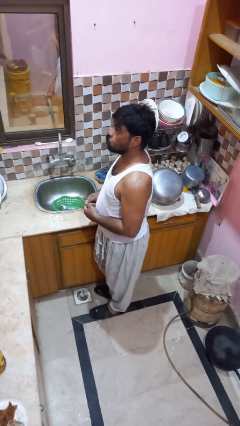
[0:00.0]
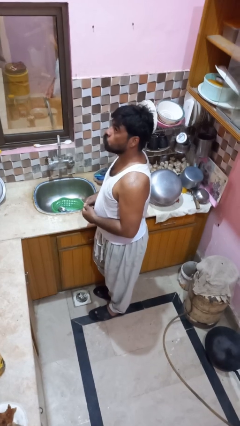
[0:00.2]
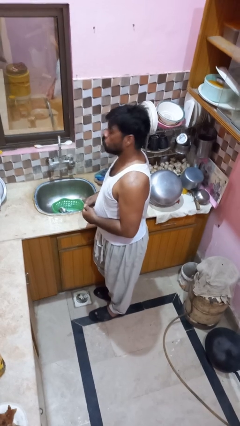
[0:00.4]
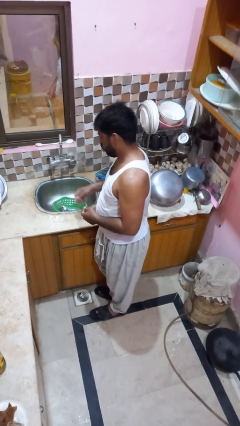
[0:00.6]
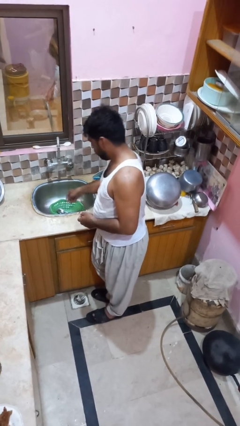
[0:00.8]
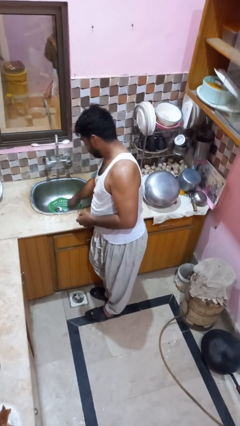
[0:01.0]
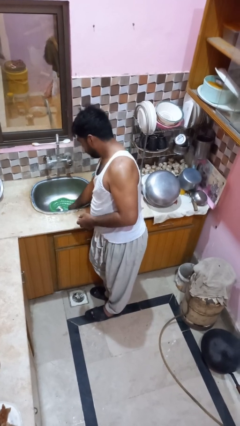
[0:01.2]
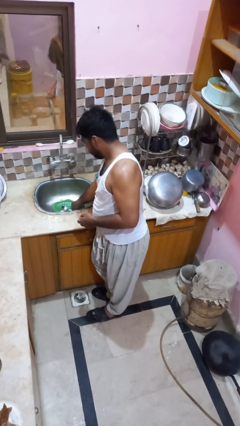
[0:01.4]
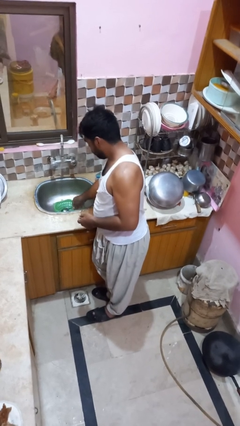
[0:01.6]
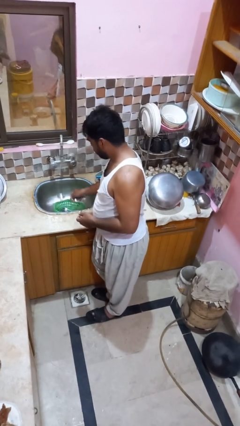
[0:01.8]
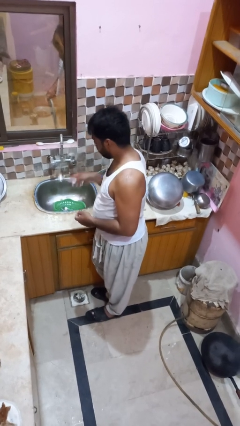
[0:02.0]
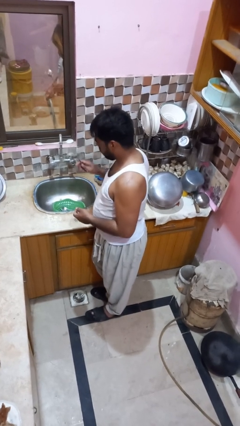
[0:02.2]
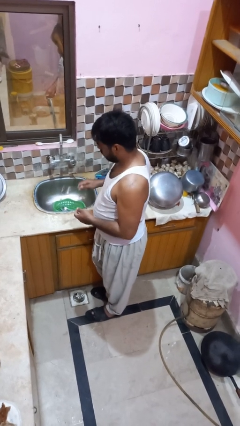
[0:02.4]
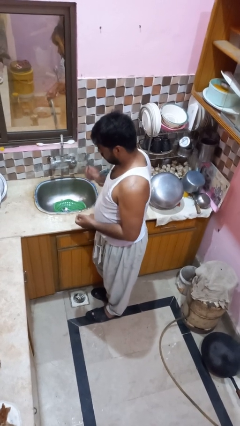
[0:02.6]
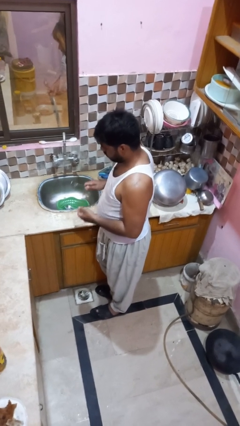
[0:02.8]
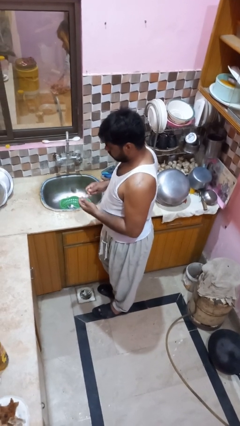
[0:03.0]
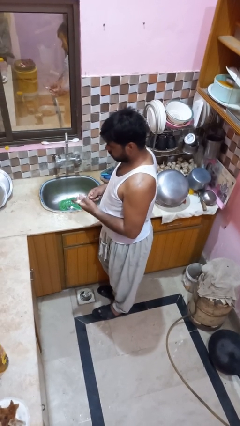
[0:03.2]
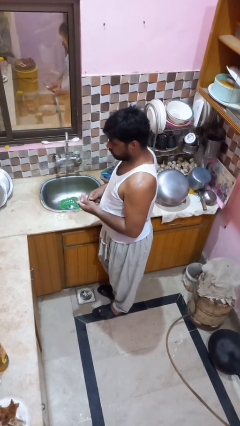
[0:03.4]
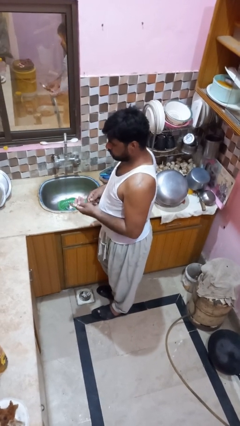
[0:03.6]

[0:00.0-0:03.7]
person unloads dishwasher

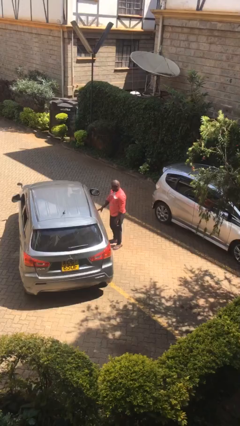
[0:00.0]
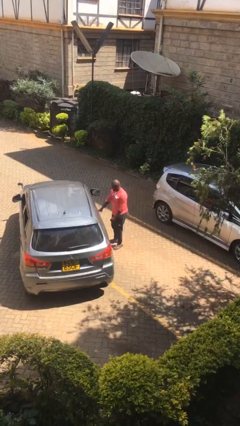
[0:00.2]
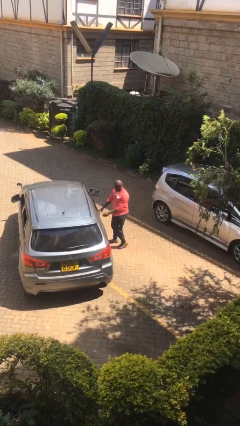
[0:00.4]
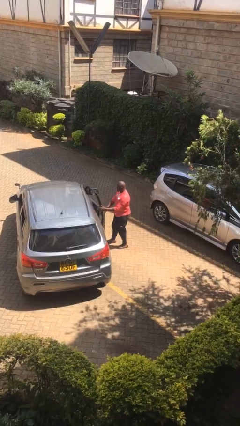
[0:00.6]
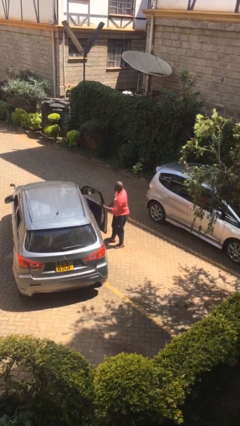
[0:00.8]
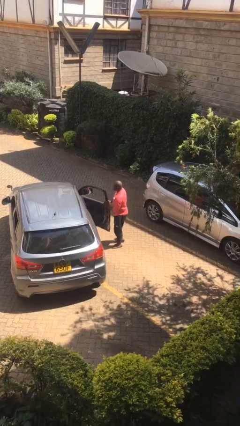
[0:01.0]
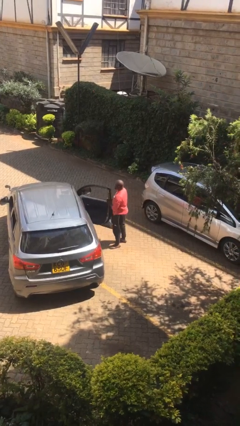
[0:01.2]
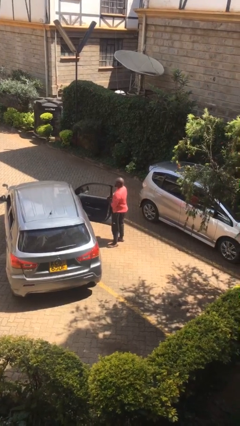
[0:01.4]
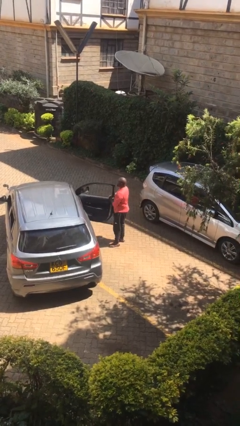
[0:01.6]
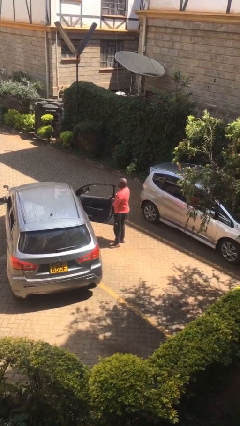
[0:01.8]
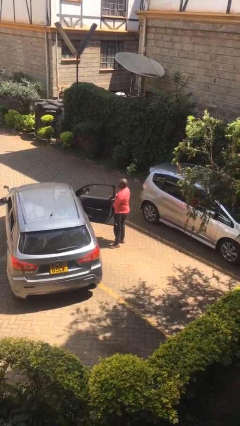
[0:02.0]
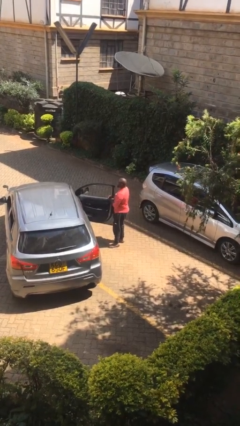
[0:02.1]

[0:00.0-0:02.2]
person opens car door

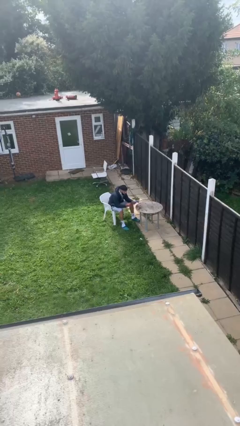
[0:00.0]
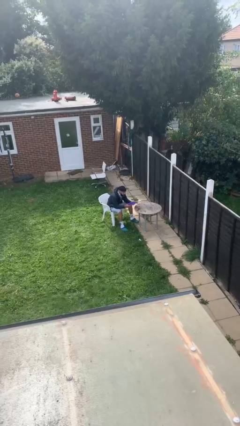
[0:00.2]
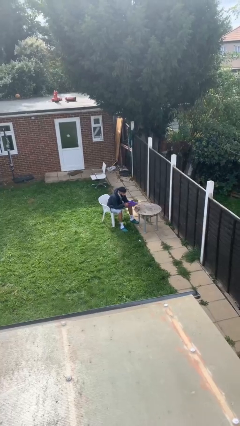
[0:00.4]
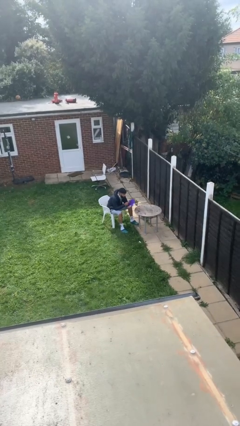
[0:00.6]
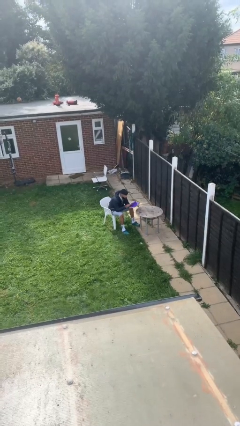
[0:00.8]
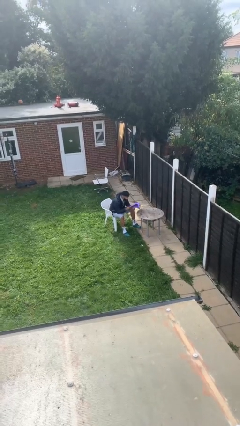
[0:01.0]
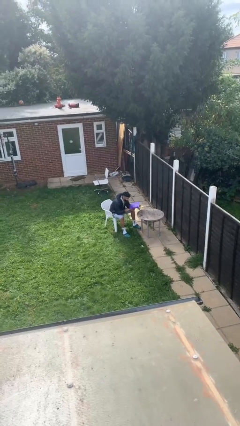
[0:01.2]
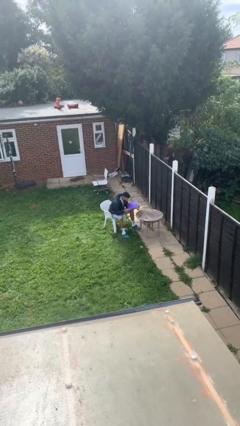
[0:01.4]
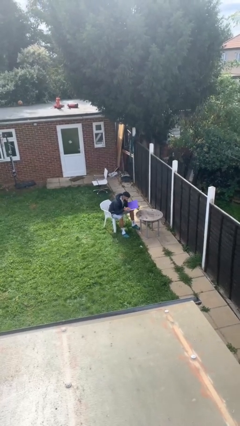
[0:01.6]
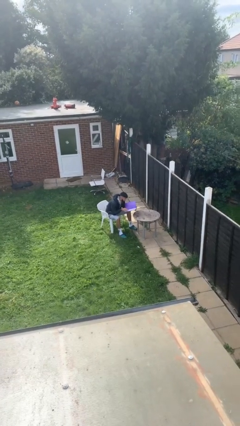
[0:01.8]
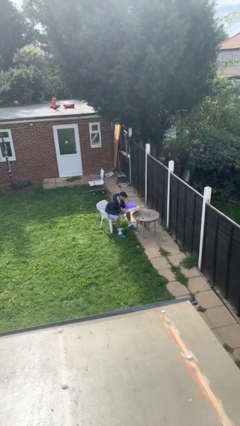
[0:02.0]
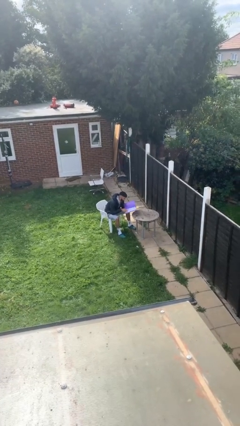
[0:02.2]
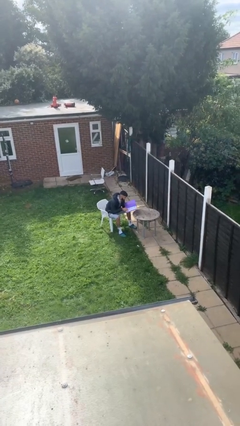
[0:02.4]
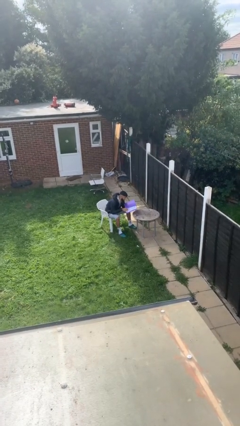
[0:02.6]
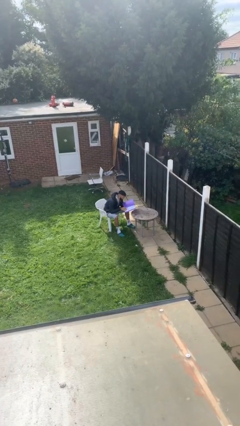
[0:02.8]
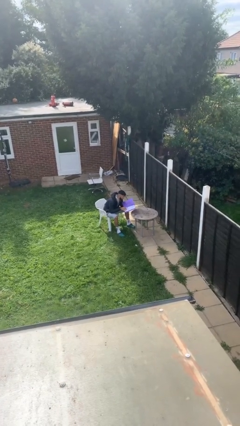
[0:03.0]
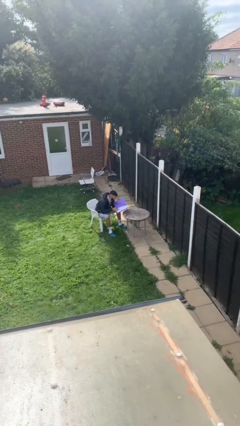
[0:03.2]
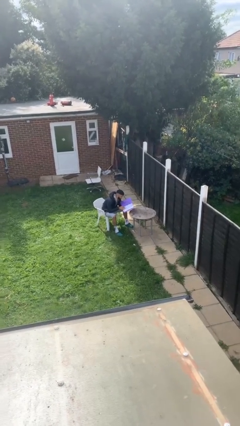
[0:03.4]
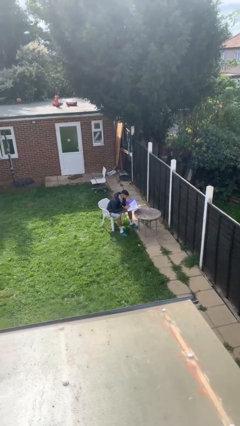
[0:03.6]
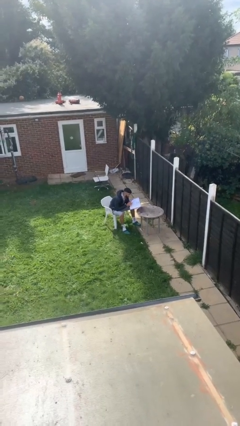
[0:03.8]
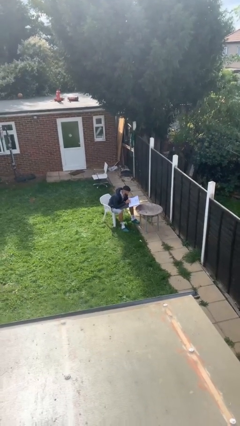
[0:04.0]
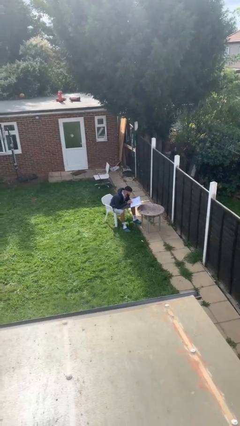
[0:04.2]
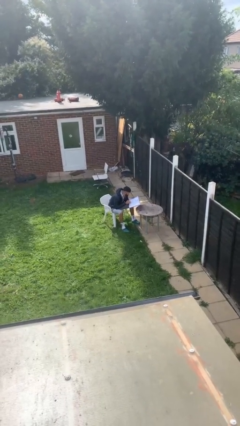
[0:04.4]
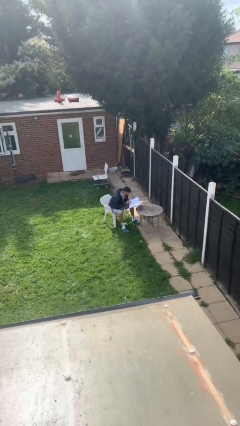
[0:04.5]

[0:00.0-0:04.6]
person reads document

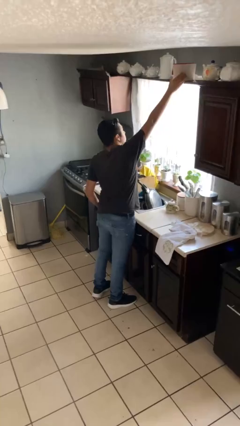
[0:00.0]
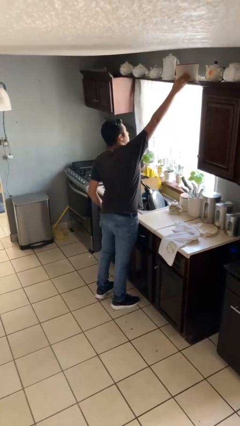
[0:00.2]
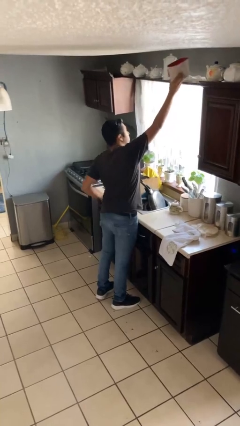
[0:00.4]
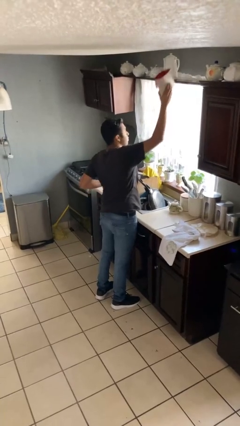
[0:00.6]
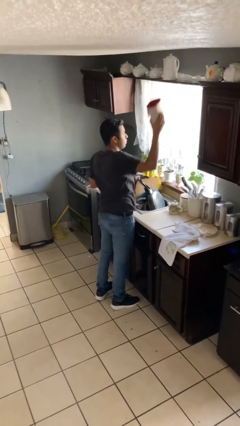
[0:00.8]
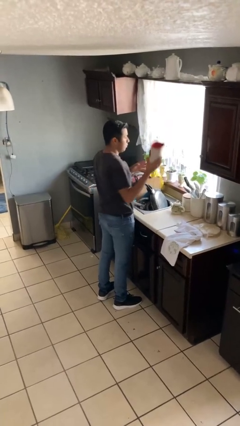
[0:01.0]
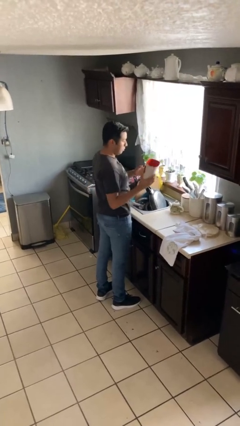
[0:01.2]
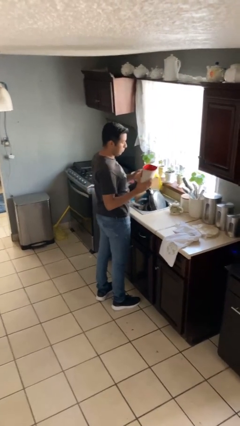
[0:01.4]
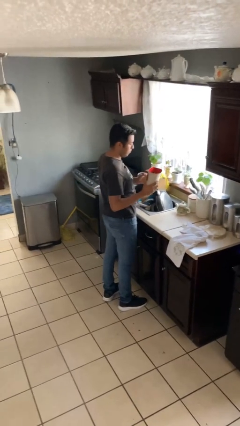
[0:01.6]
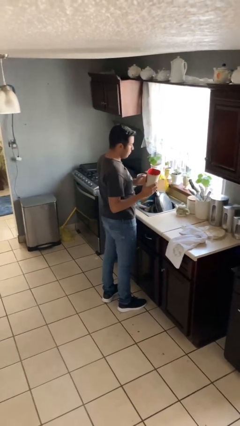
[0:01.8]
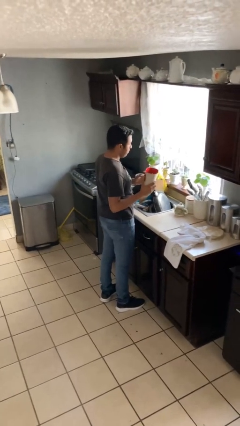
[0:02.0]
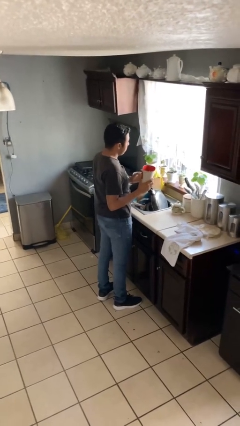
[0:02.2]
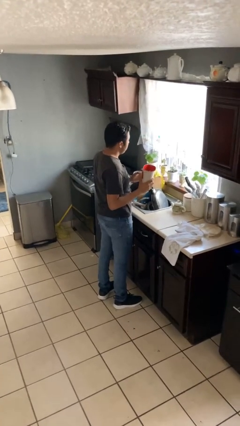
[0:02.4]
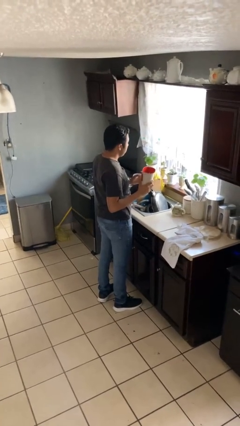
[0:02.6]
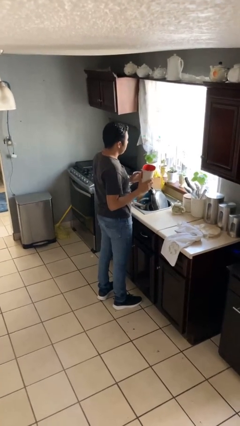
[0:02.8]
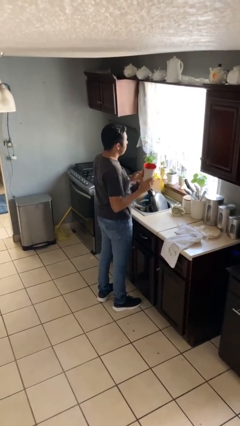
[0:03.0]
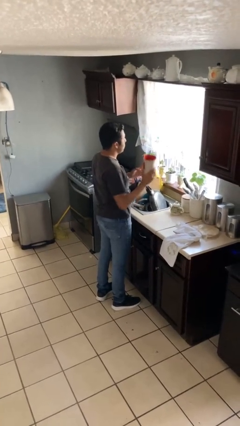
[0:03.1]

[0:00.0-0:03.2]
person picks up object from countertop

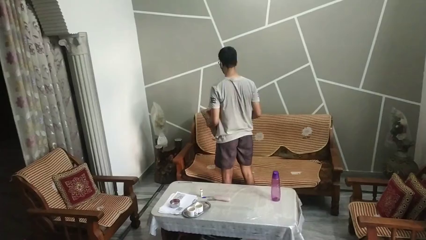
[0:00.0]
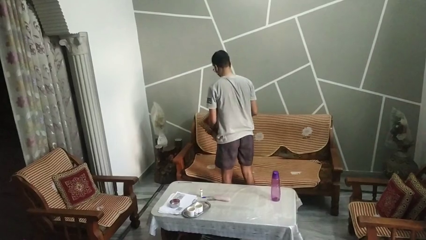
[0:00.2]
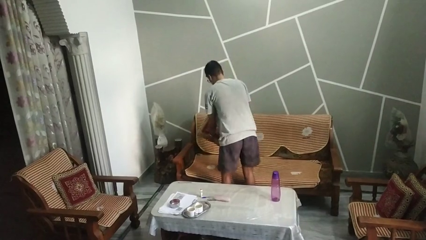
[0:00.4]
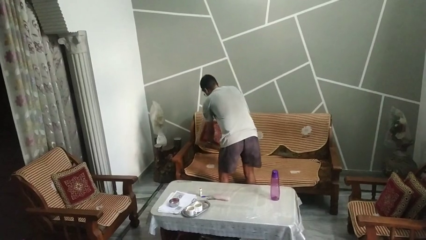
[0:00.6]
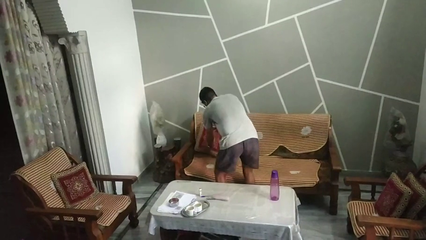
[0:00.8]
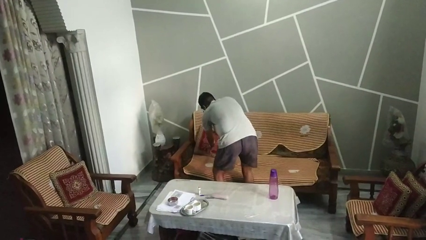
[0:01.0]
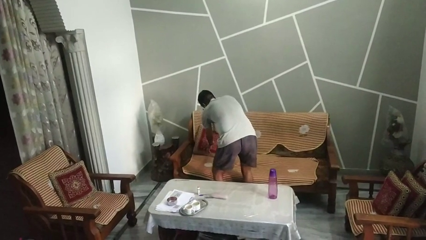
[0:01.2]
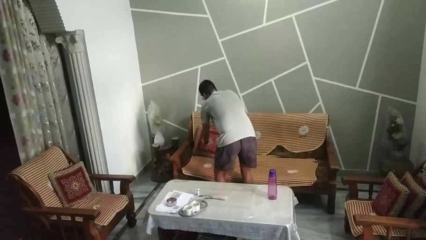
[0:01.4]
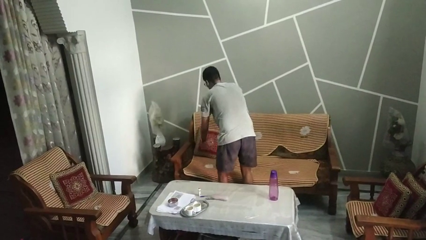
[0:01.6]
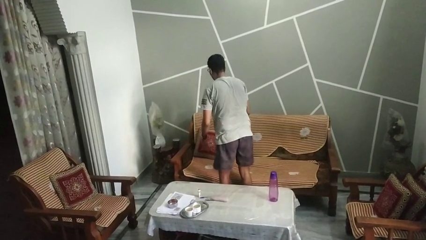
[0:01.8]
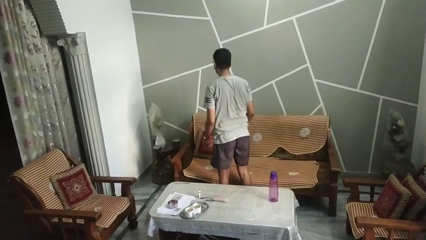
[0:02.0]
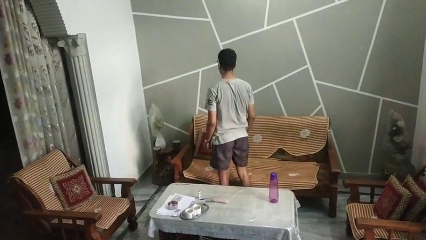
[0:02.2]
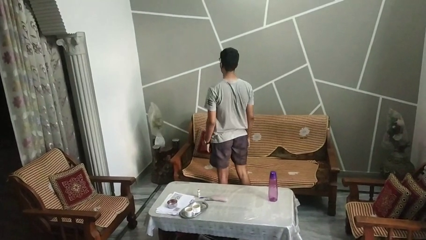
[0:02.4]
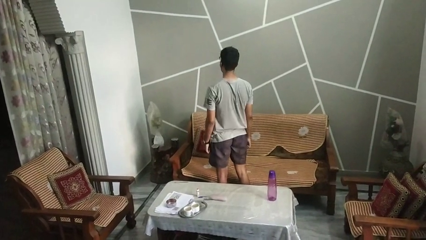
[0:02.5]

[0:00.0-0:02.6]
person puts down object on couch

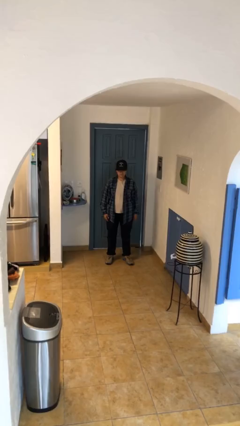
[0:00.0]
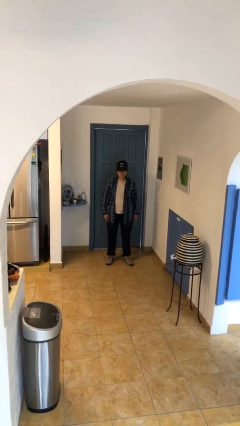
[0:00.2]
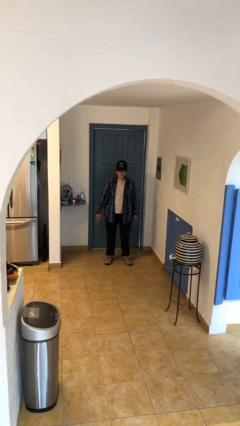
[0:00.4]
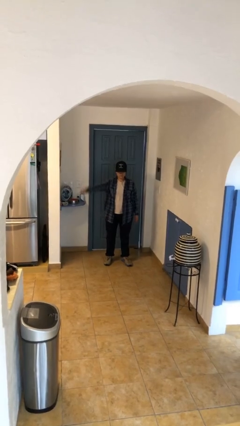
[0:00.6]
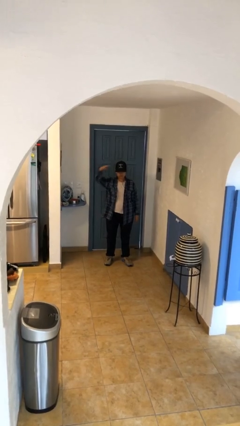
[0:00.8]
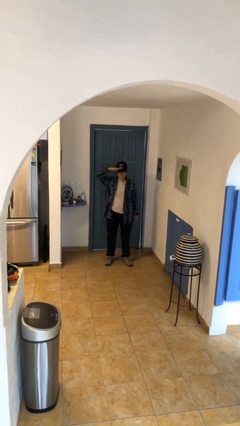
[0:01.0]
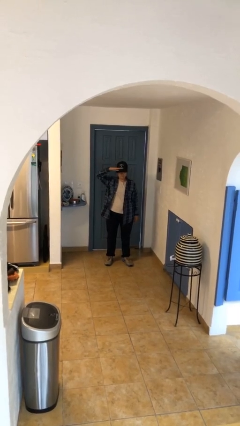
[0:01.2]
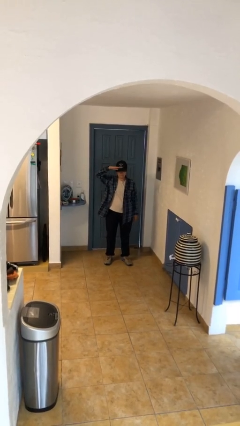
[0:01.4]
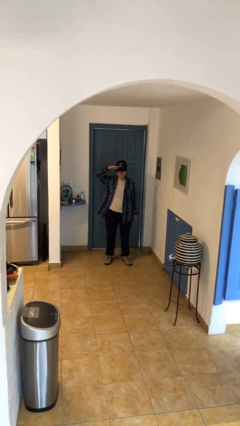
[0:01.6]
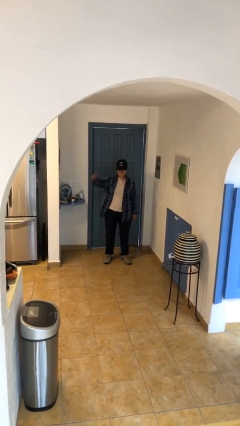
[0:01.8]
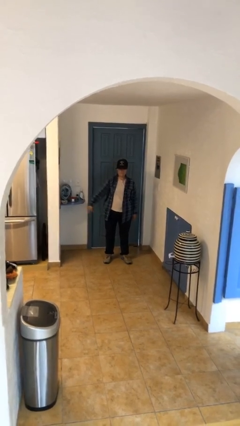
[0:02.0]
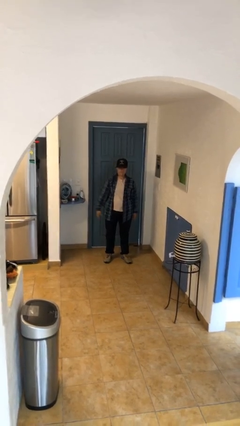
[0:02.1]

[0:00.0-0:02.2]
person salutes
